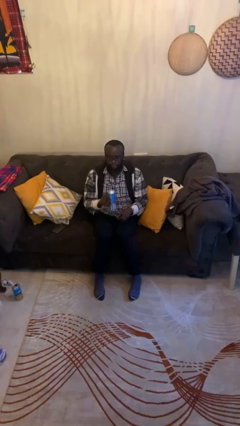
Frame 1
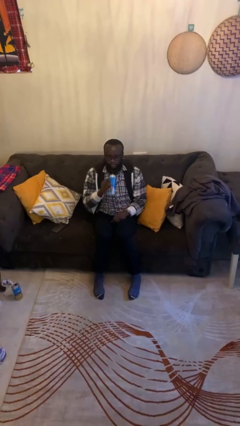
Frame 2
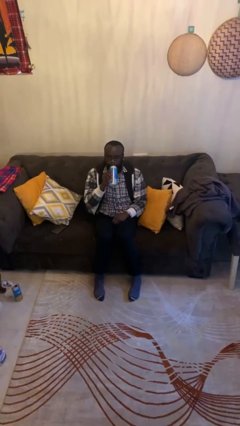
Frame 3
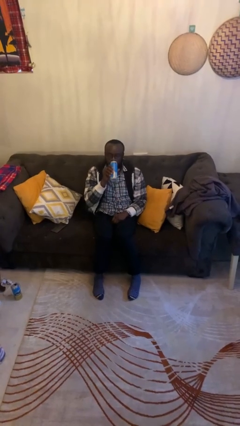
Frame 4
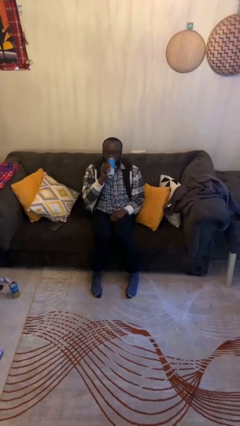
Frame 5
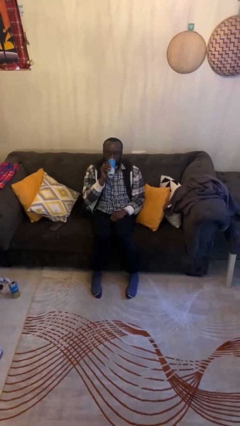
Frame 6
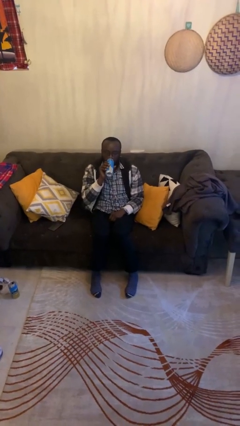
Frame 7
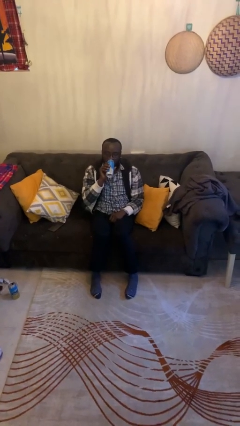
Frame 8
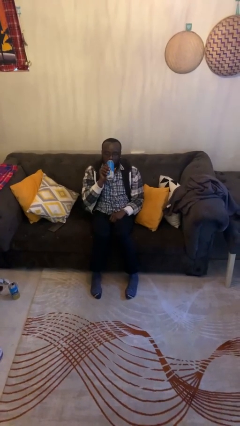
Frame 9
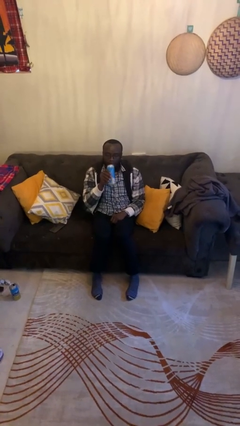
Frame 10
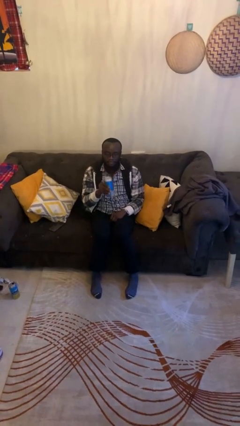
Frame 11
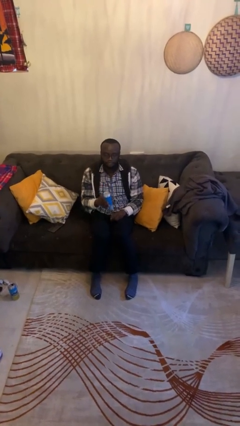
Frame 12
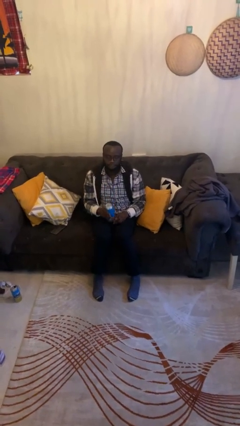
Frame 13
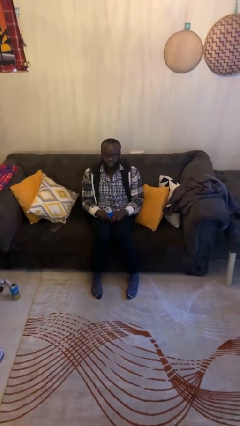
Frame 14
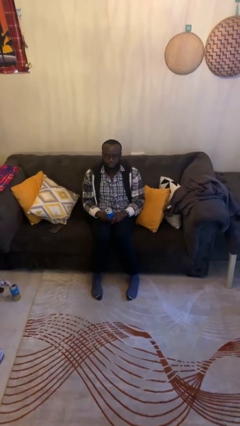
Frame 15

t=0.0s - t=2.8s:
person drinks from beverage can

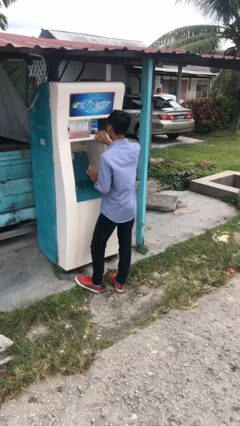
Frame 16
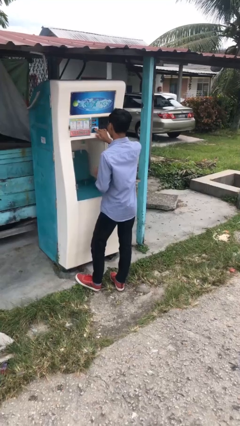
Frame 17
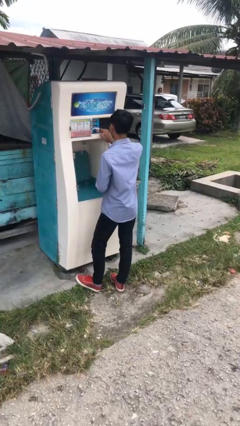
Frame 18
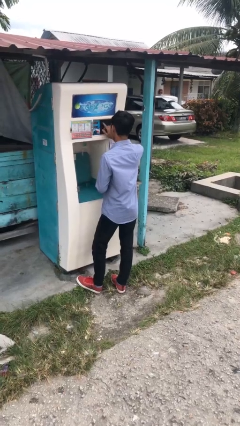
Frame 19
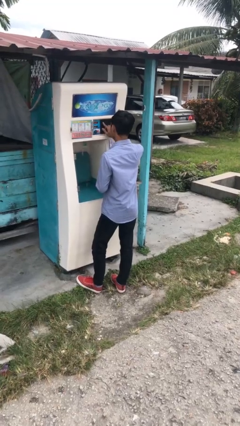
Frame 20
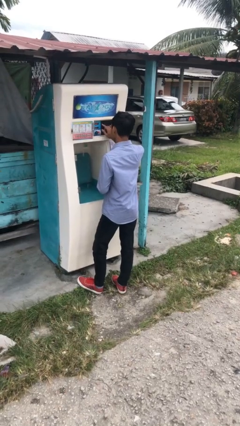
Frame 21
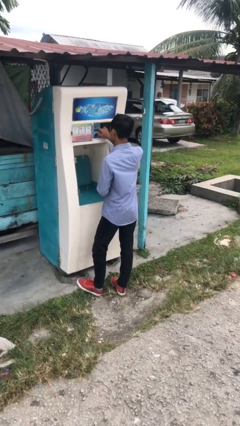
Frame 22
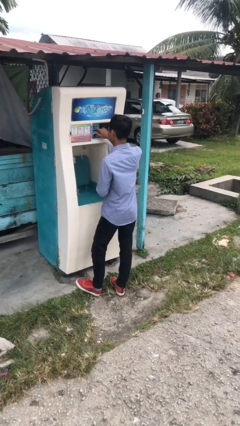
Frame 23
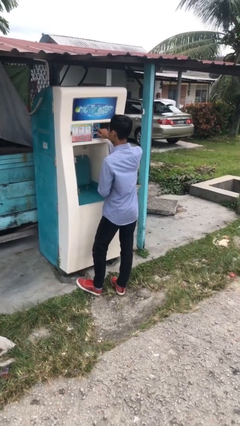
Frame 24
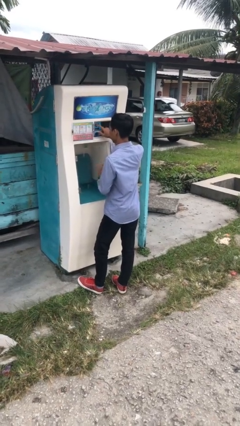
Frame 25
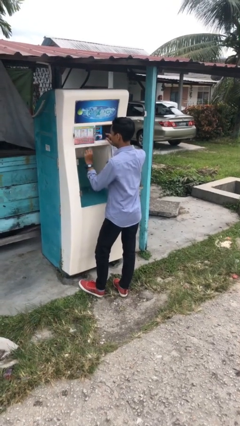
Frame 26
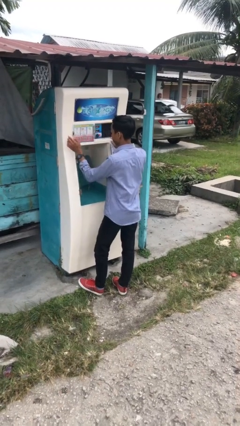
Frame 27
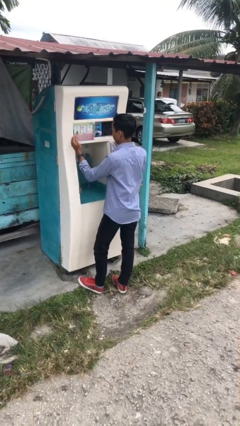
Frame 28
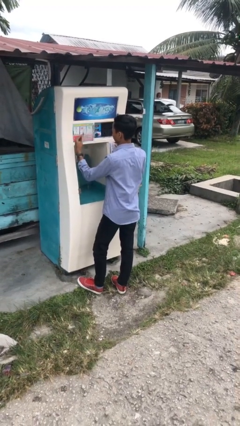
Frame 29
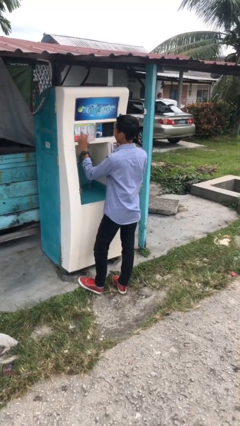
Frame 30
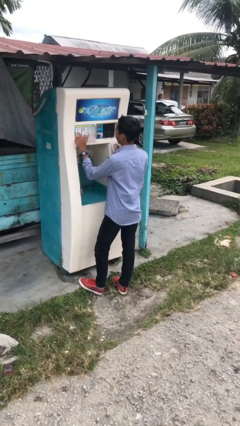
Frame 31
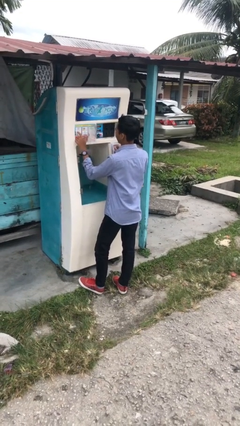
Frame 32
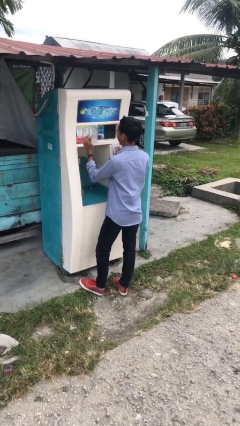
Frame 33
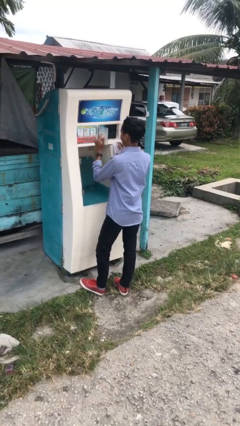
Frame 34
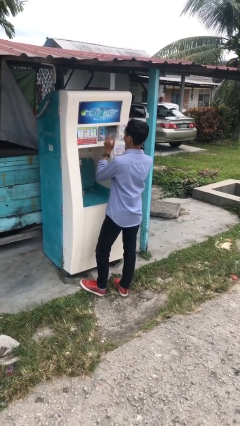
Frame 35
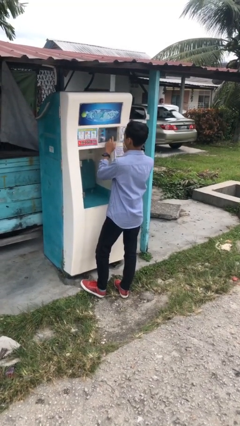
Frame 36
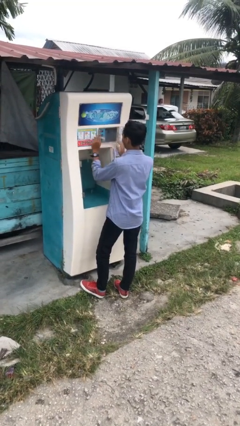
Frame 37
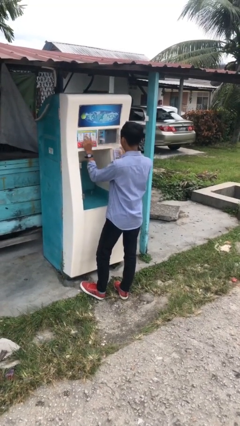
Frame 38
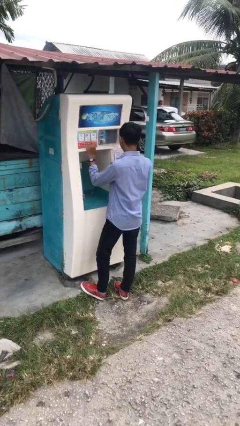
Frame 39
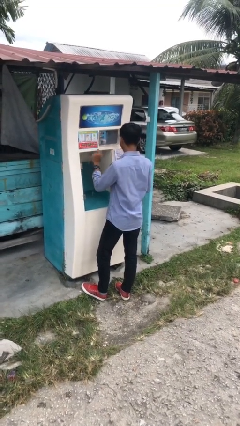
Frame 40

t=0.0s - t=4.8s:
person purchases from machine

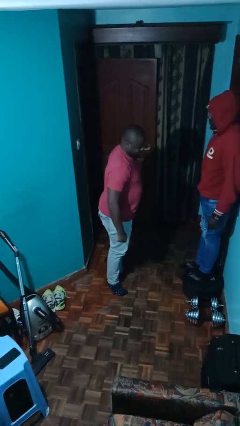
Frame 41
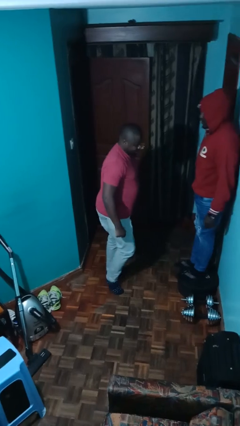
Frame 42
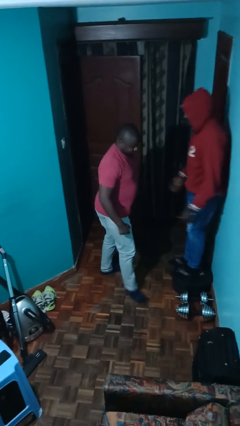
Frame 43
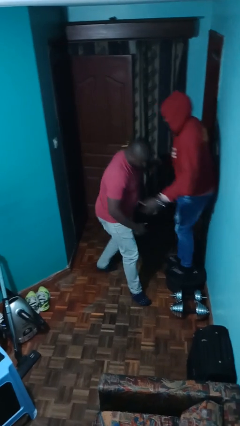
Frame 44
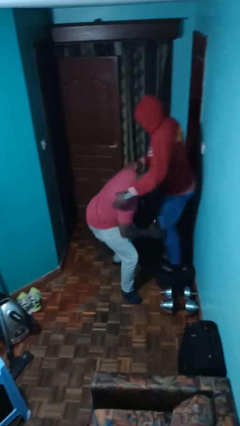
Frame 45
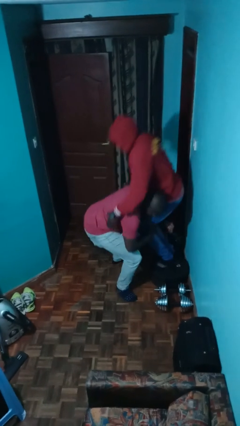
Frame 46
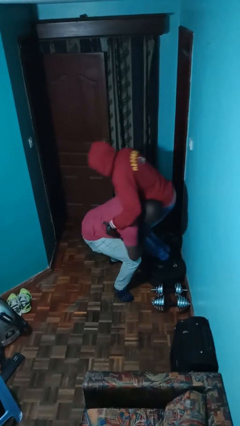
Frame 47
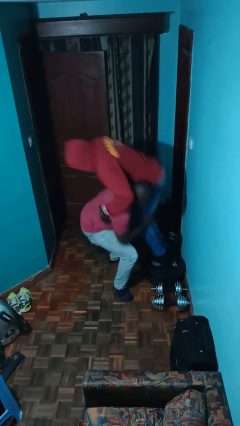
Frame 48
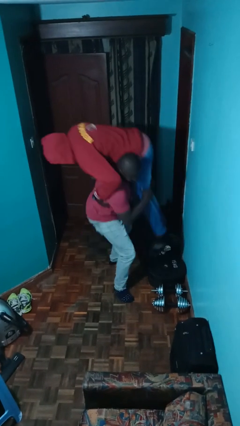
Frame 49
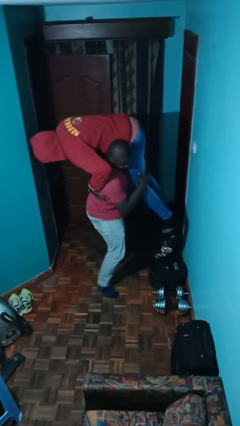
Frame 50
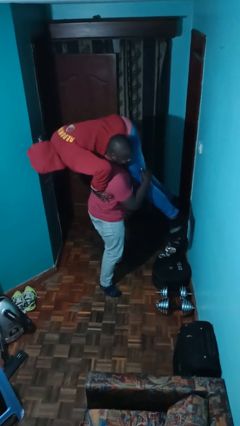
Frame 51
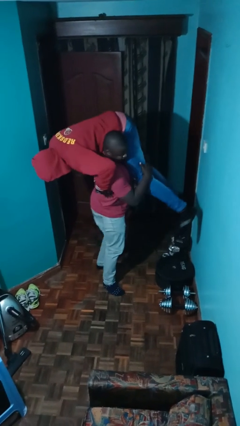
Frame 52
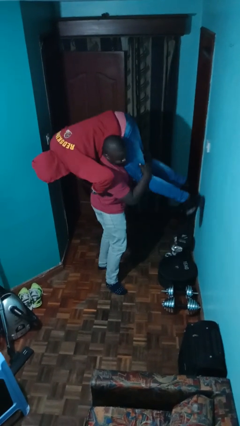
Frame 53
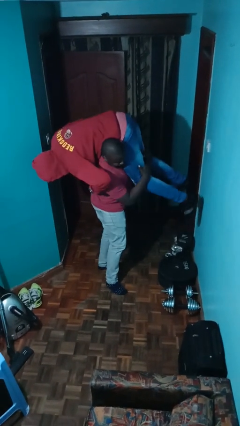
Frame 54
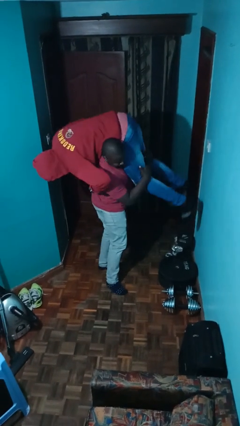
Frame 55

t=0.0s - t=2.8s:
person carries person over shoulder

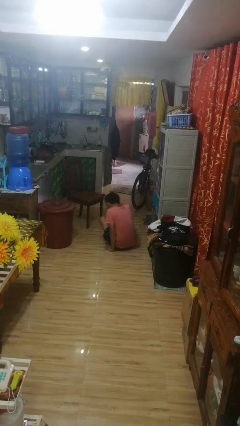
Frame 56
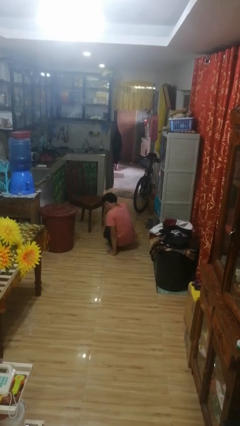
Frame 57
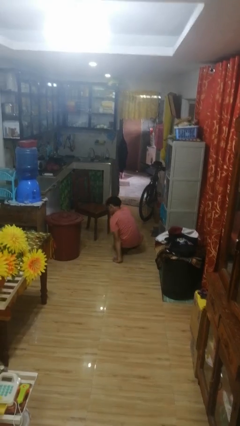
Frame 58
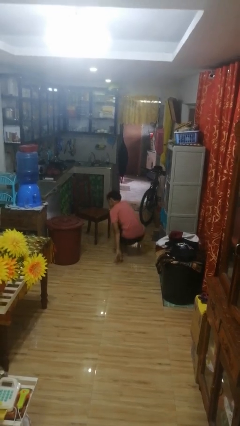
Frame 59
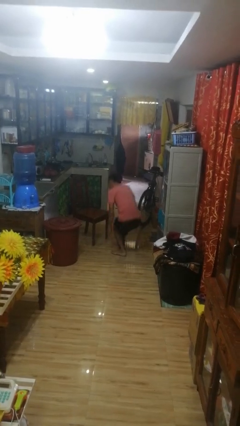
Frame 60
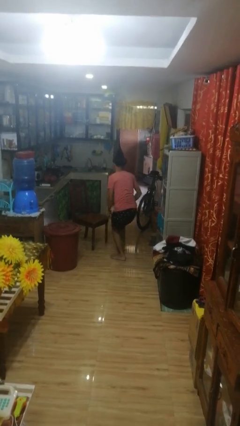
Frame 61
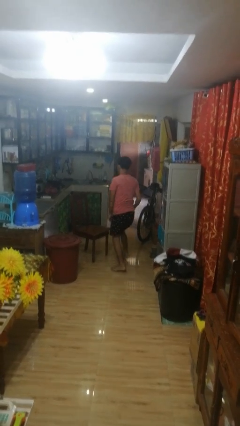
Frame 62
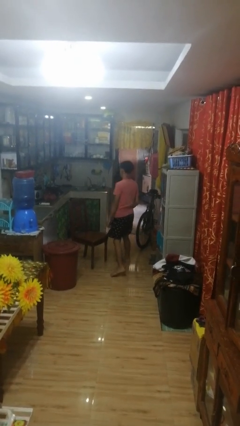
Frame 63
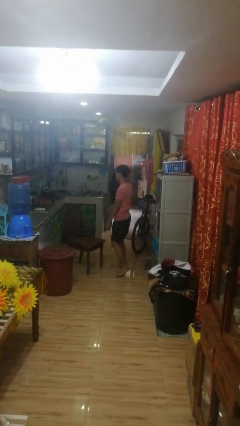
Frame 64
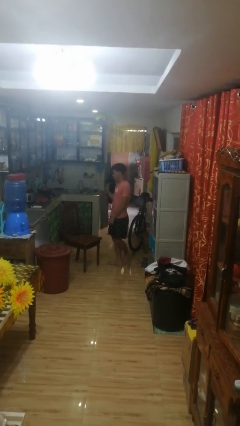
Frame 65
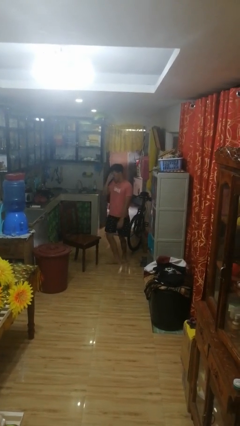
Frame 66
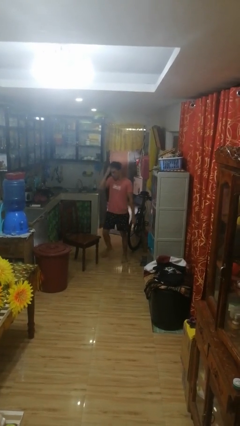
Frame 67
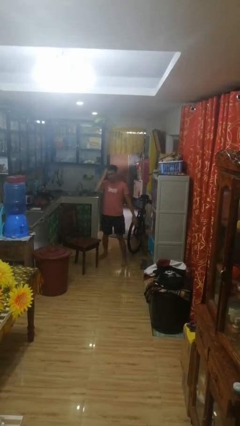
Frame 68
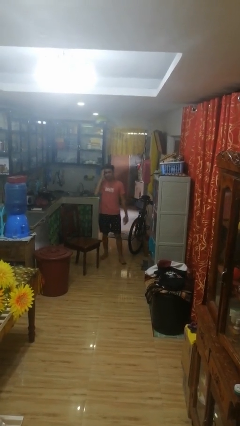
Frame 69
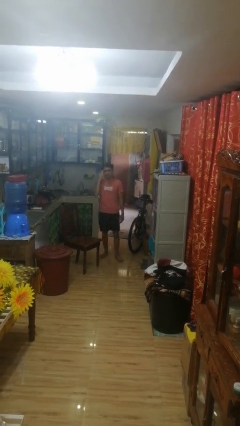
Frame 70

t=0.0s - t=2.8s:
person stands up from floor

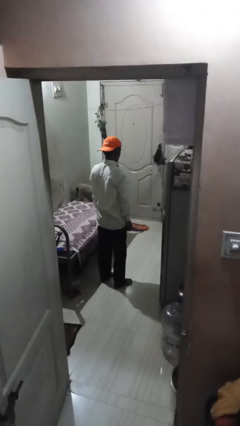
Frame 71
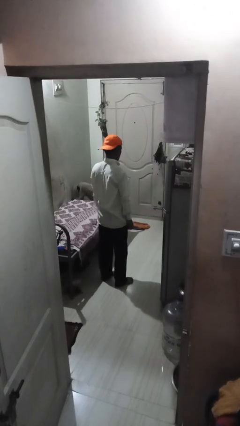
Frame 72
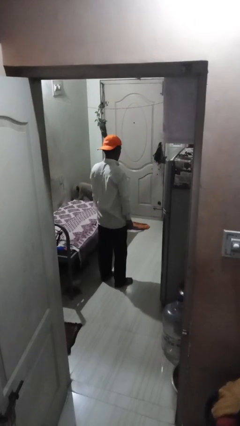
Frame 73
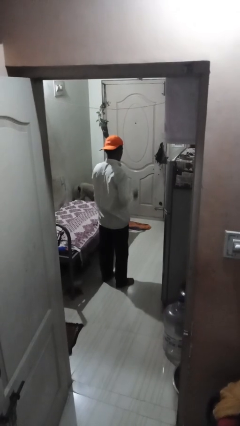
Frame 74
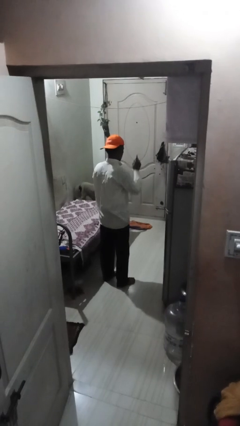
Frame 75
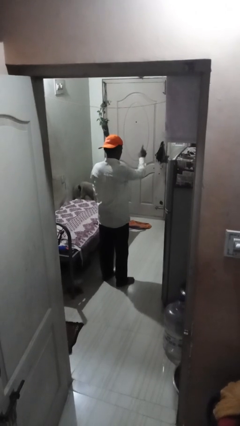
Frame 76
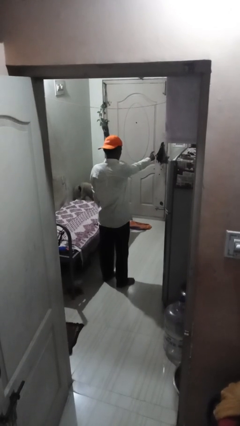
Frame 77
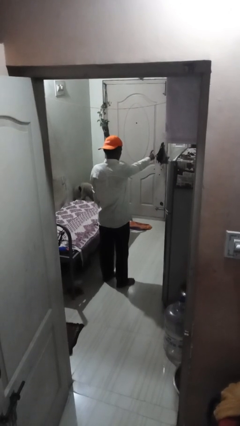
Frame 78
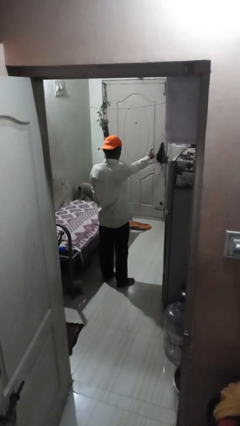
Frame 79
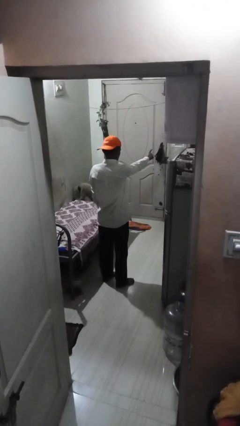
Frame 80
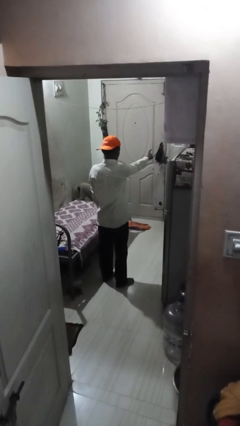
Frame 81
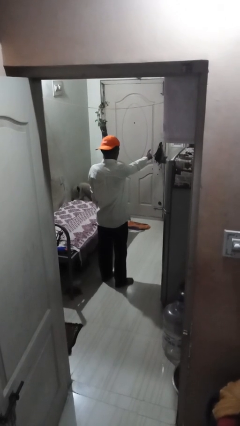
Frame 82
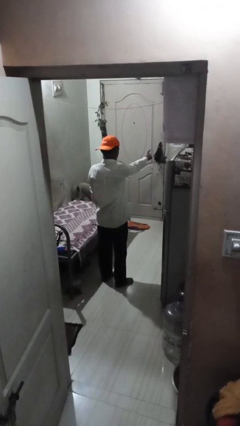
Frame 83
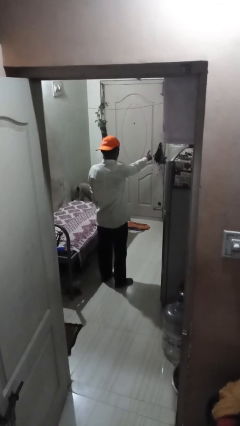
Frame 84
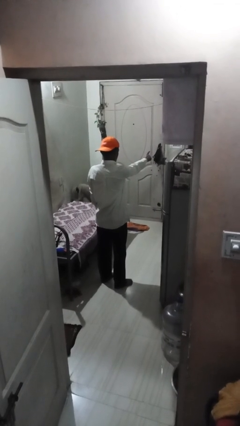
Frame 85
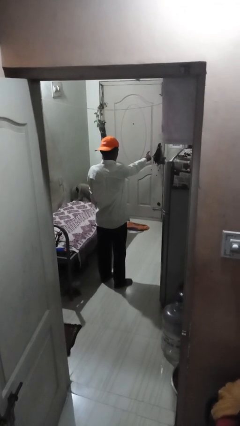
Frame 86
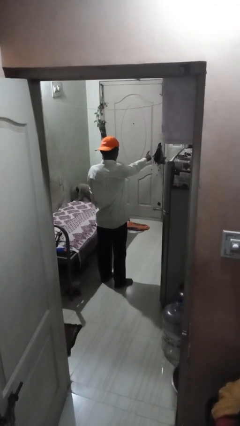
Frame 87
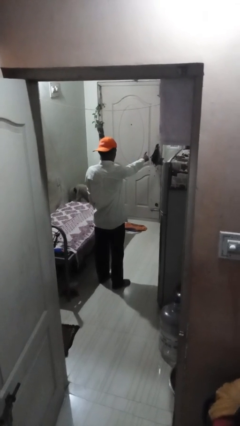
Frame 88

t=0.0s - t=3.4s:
person points at person

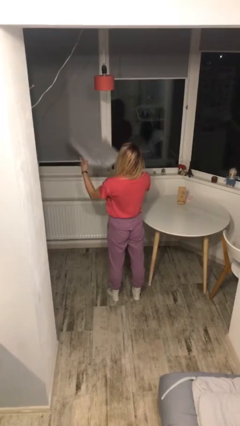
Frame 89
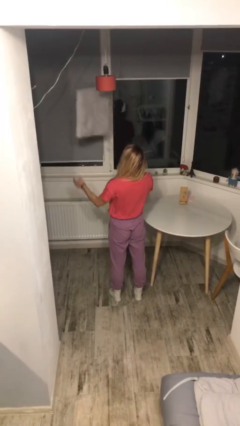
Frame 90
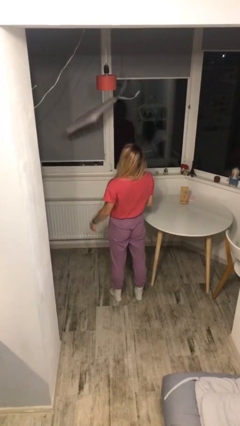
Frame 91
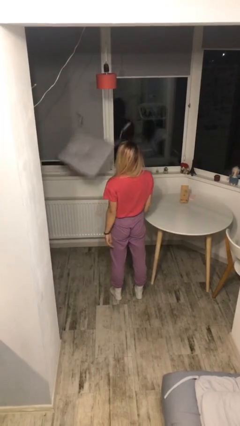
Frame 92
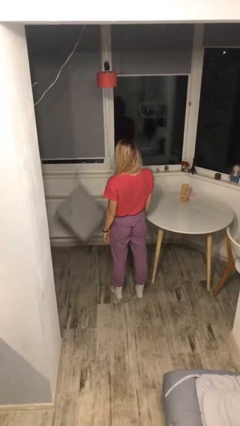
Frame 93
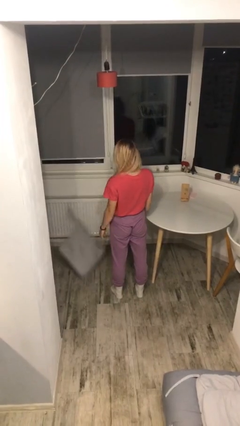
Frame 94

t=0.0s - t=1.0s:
person throws object into air
